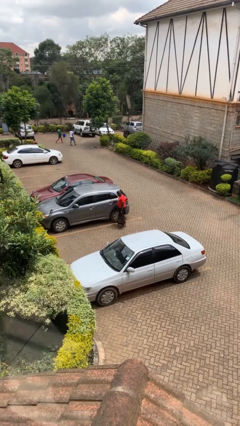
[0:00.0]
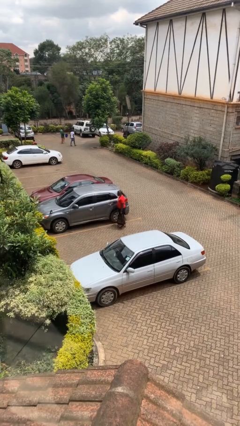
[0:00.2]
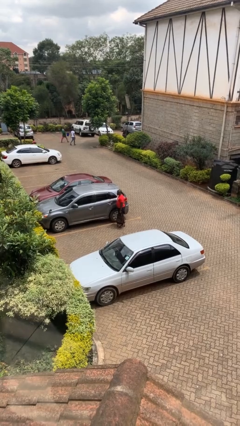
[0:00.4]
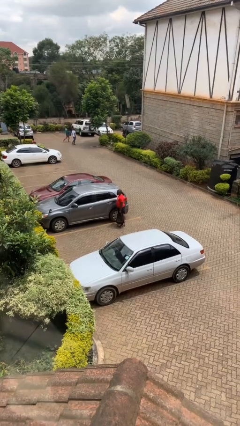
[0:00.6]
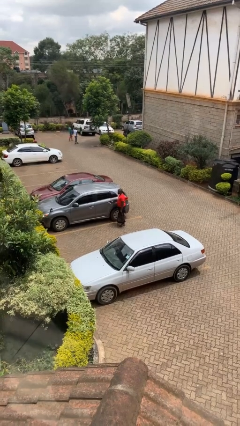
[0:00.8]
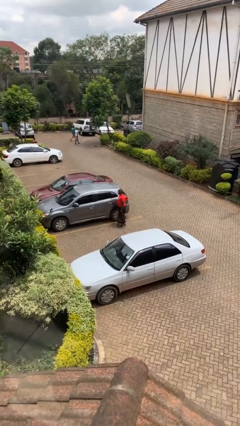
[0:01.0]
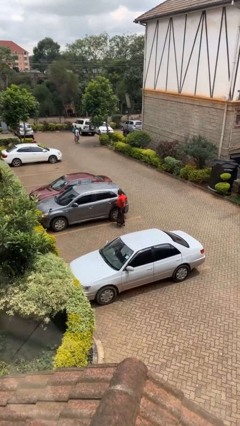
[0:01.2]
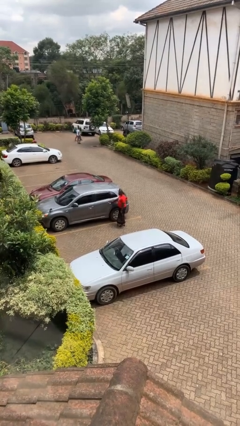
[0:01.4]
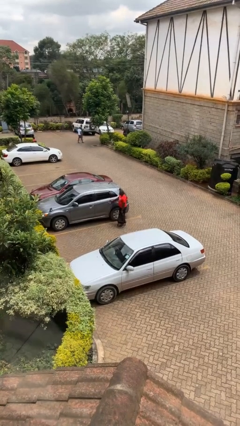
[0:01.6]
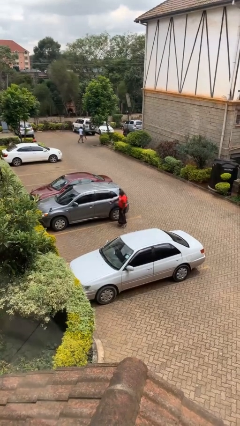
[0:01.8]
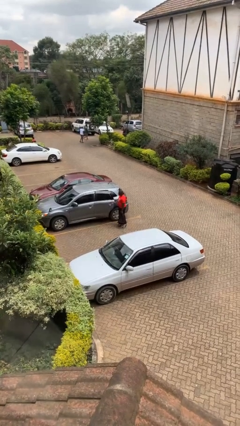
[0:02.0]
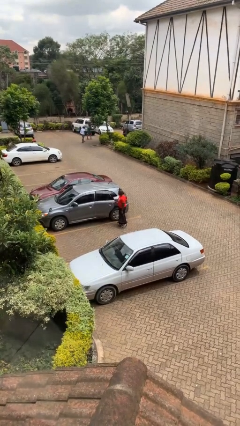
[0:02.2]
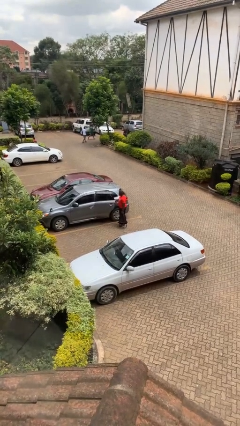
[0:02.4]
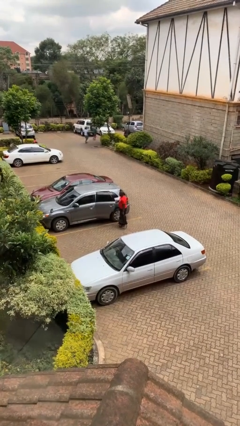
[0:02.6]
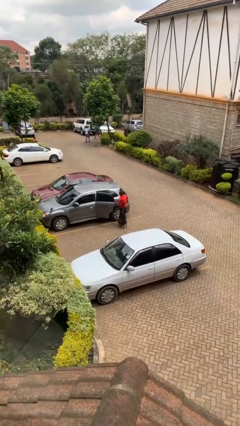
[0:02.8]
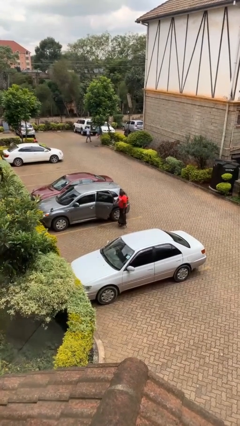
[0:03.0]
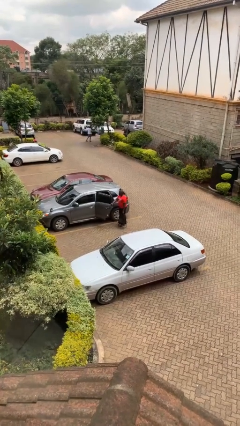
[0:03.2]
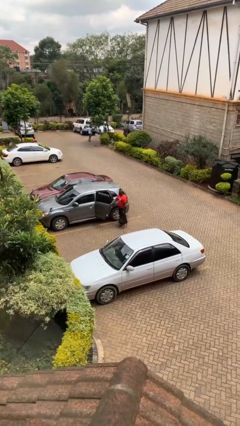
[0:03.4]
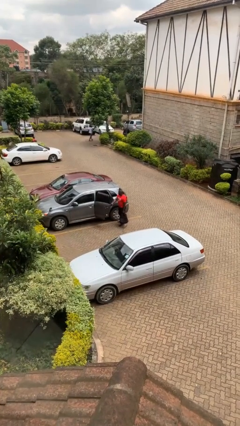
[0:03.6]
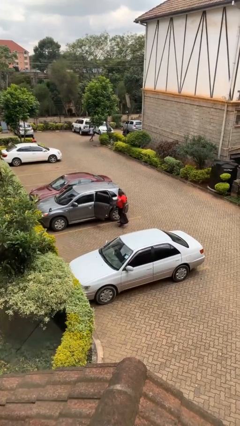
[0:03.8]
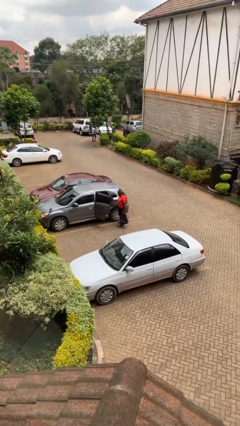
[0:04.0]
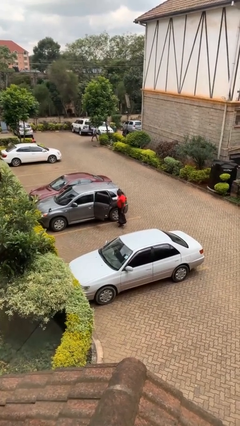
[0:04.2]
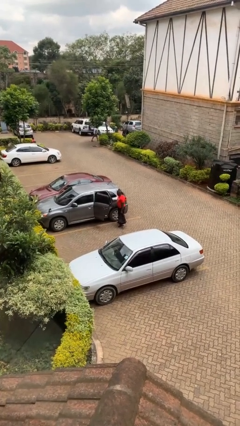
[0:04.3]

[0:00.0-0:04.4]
person opens car door

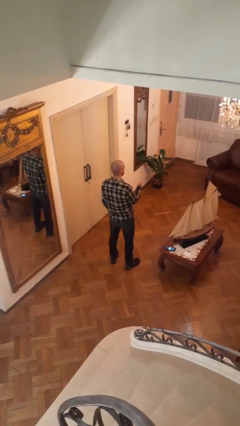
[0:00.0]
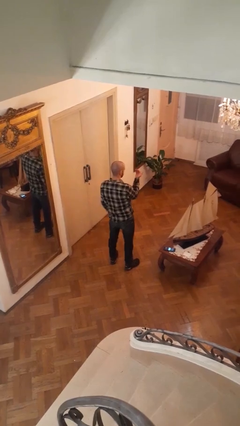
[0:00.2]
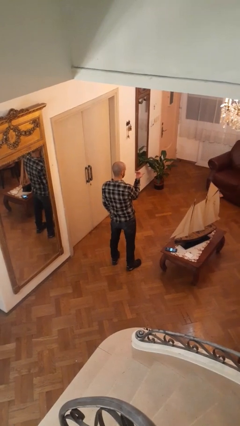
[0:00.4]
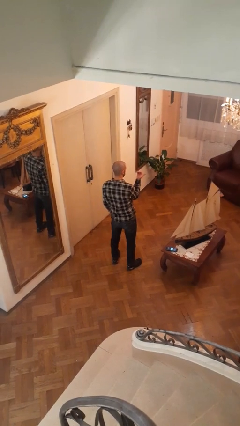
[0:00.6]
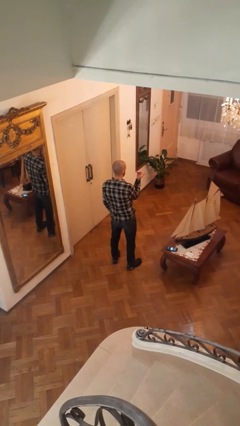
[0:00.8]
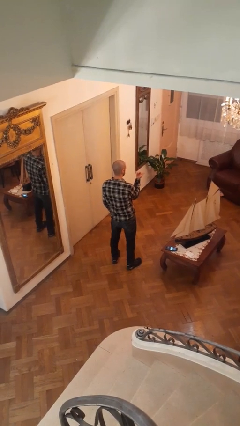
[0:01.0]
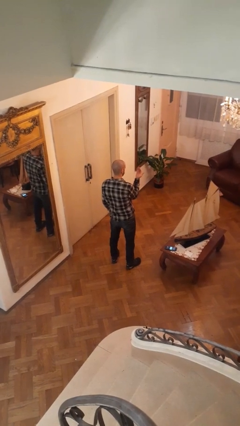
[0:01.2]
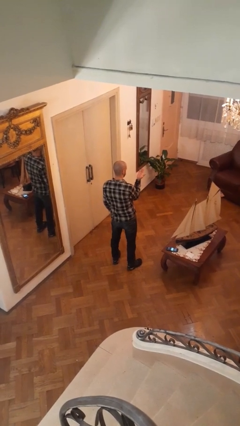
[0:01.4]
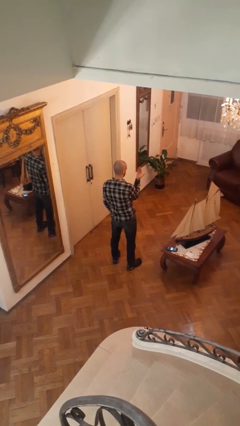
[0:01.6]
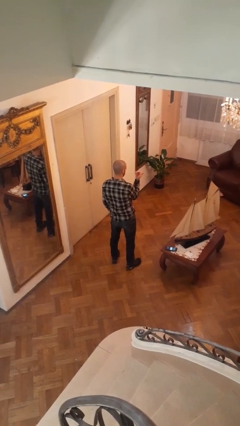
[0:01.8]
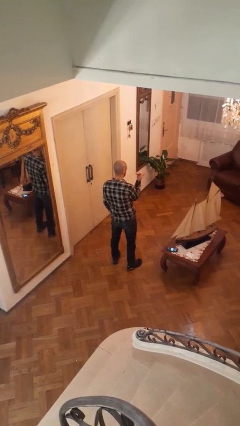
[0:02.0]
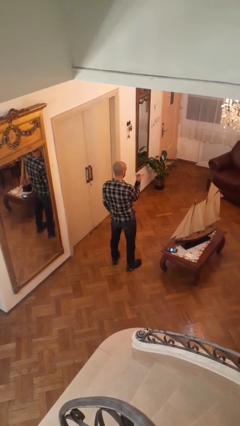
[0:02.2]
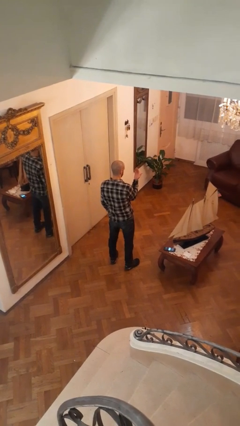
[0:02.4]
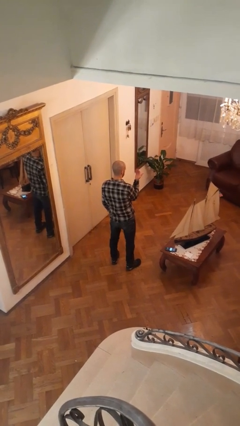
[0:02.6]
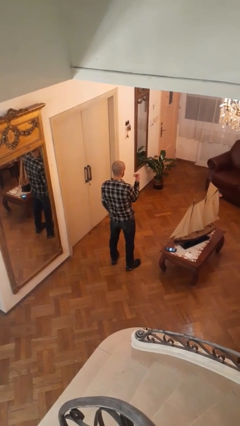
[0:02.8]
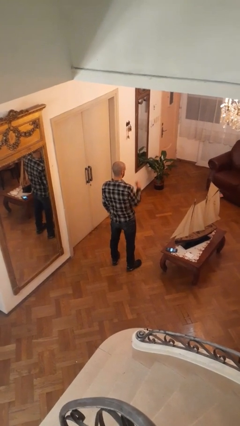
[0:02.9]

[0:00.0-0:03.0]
person gestures come here

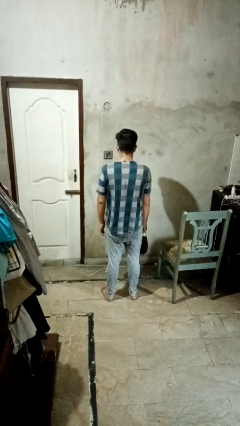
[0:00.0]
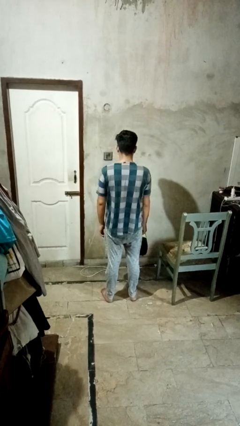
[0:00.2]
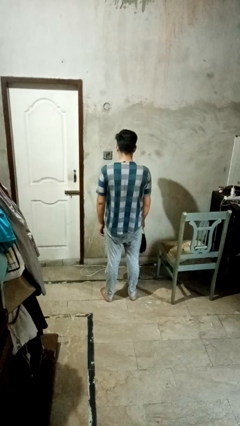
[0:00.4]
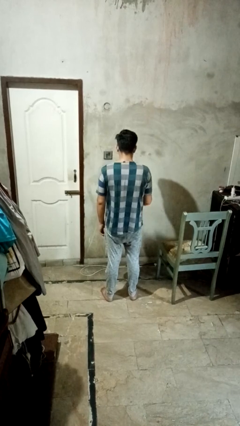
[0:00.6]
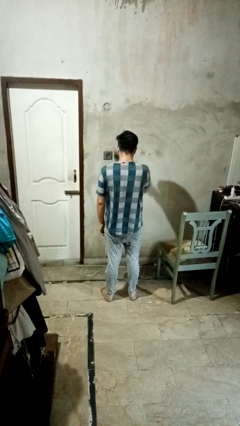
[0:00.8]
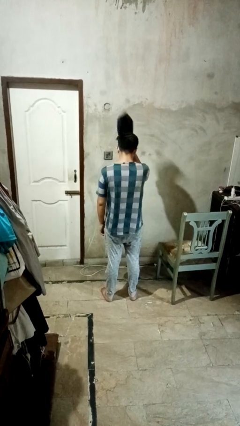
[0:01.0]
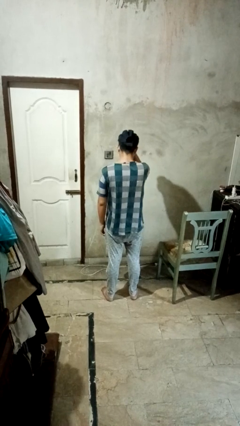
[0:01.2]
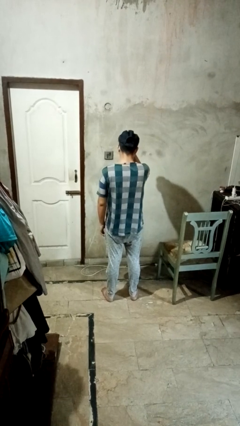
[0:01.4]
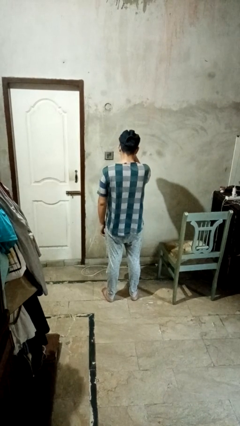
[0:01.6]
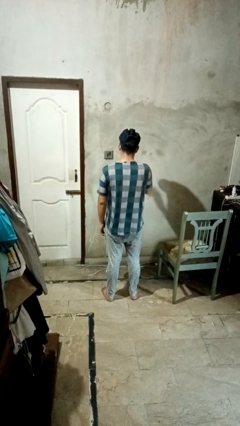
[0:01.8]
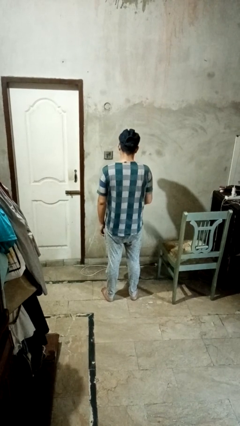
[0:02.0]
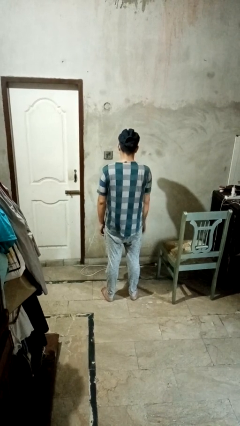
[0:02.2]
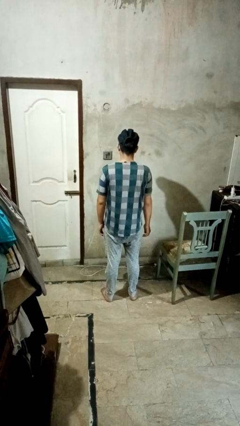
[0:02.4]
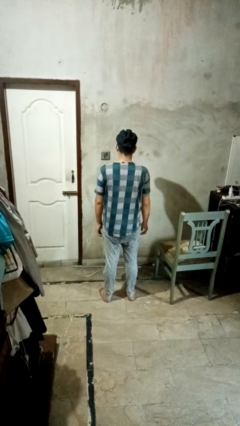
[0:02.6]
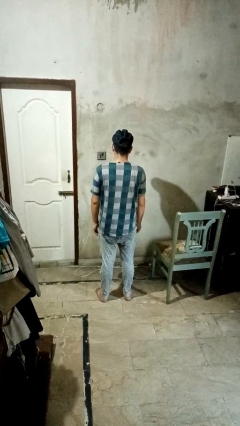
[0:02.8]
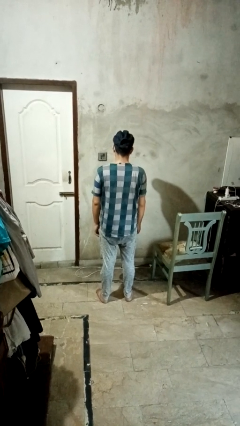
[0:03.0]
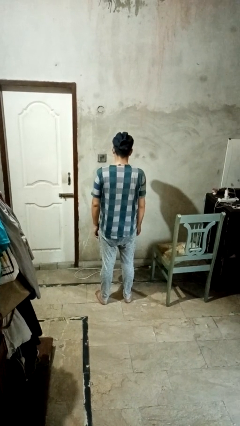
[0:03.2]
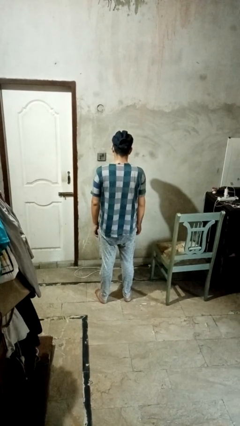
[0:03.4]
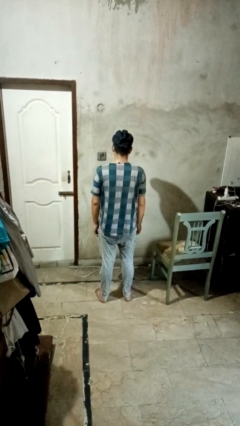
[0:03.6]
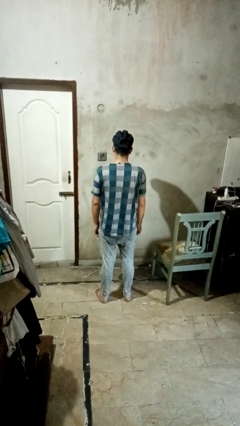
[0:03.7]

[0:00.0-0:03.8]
person puts on hat

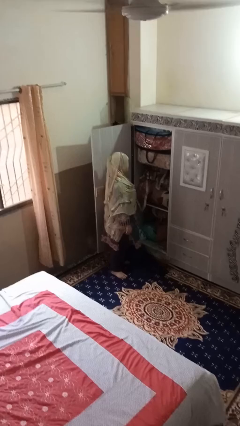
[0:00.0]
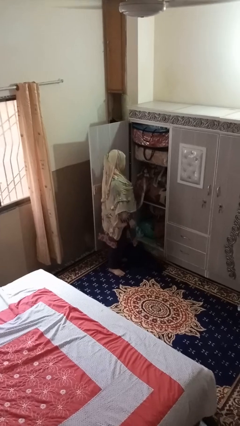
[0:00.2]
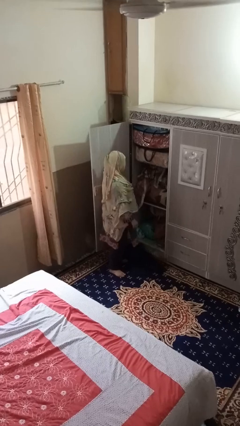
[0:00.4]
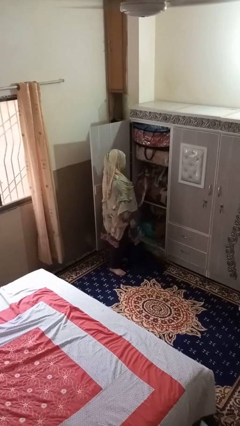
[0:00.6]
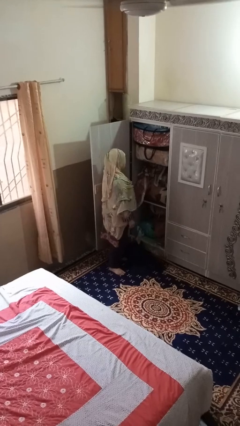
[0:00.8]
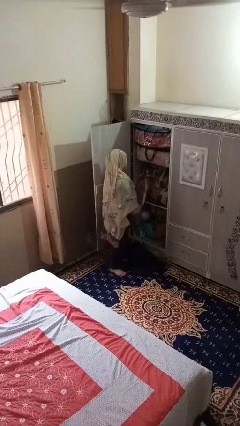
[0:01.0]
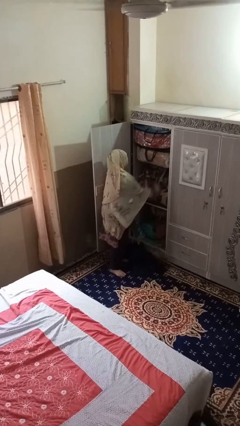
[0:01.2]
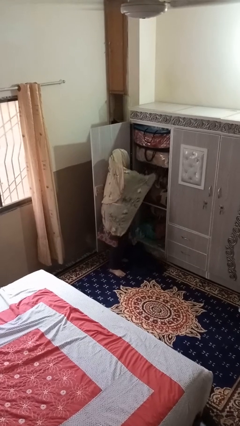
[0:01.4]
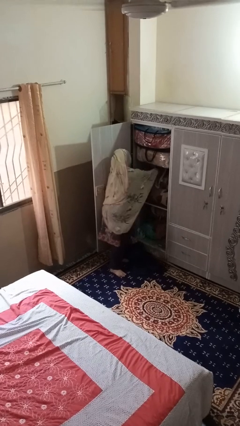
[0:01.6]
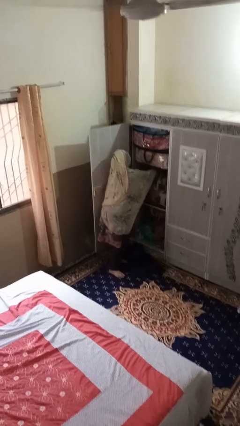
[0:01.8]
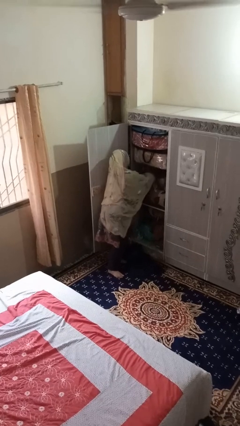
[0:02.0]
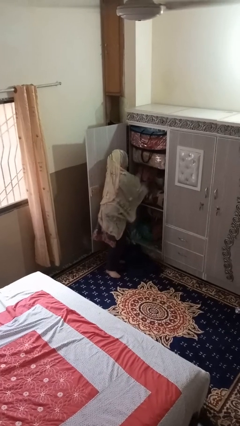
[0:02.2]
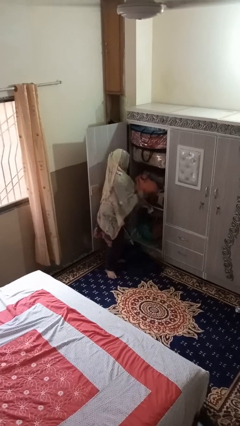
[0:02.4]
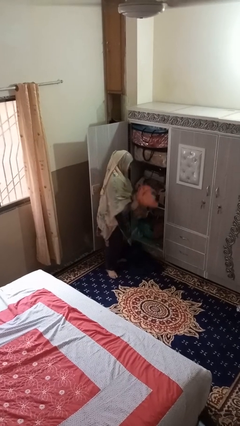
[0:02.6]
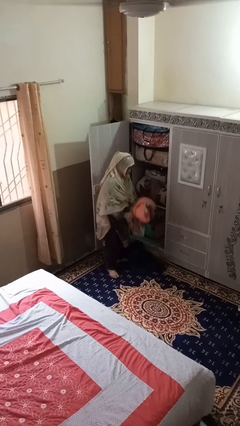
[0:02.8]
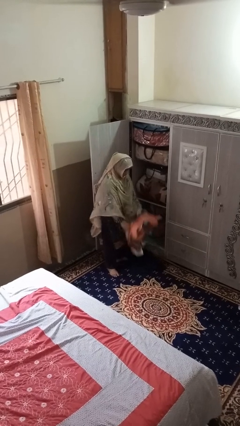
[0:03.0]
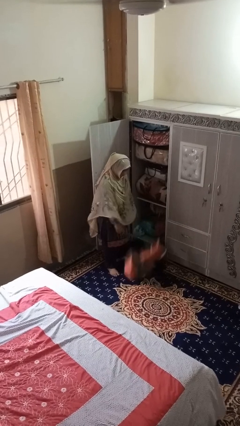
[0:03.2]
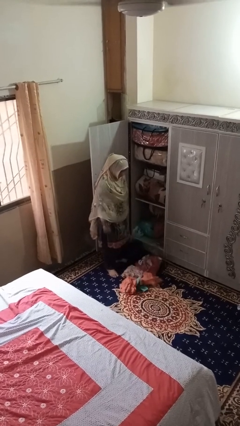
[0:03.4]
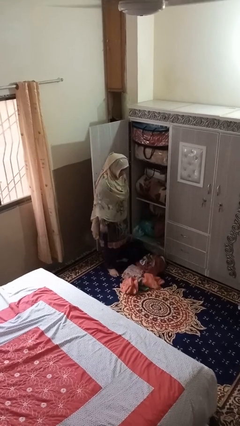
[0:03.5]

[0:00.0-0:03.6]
person puts clothes into dresser

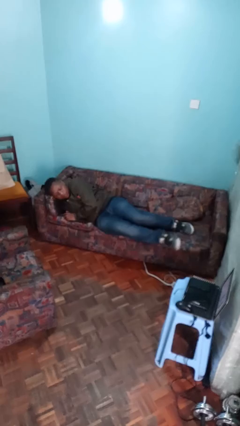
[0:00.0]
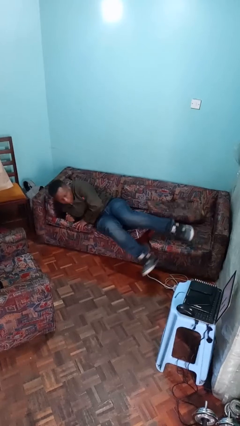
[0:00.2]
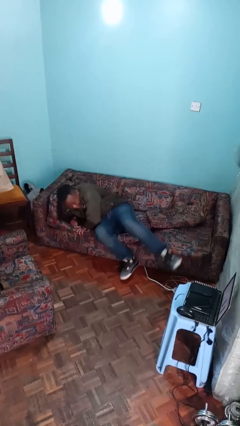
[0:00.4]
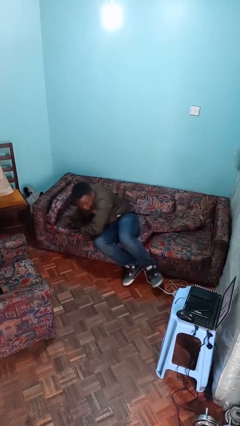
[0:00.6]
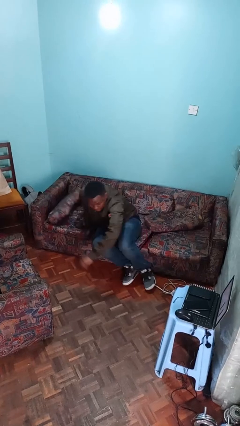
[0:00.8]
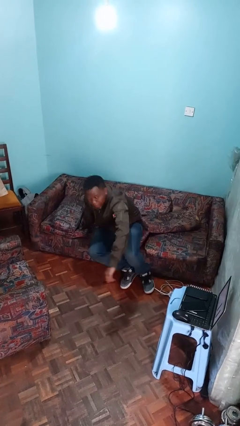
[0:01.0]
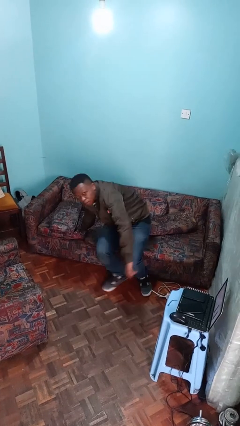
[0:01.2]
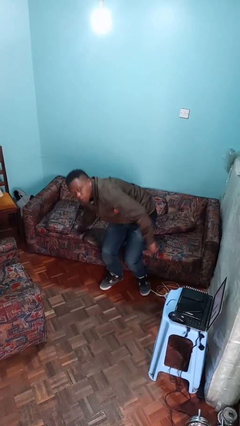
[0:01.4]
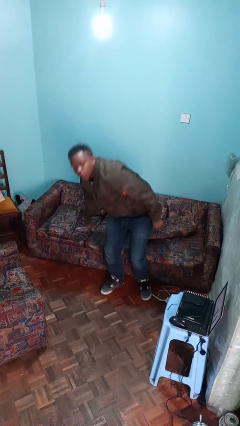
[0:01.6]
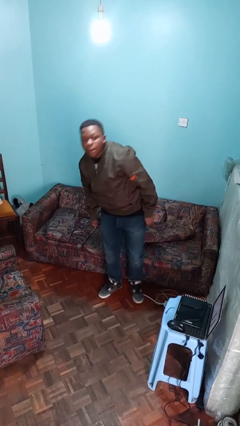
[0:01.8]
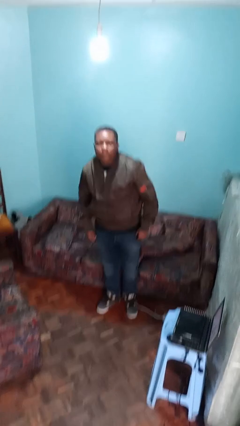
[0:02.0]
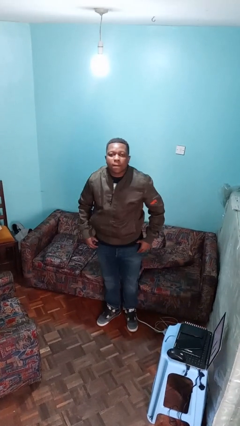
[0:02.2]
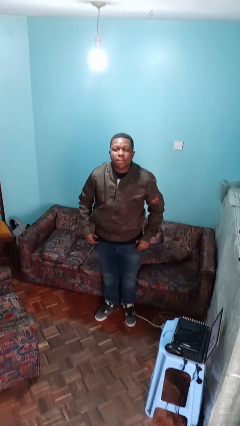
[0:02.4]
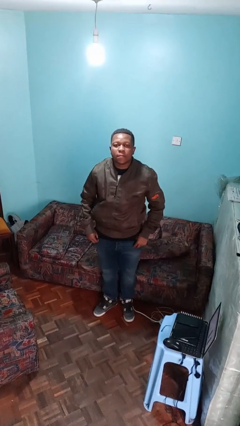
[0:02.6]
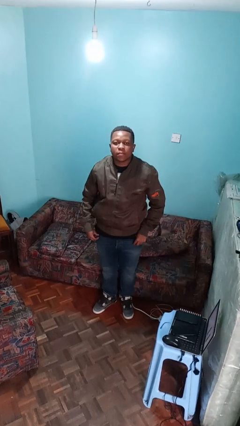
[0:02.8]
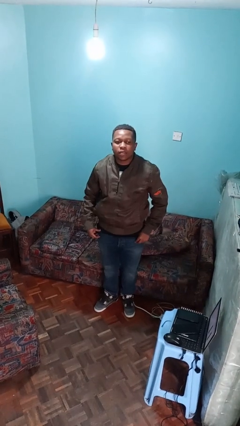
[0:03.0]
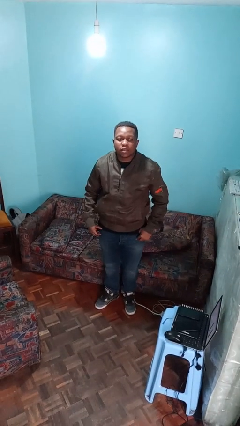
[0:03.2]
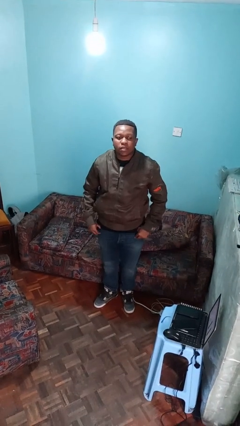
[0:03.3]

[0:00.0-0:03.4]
person stands up
